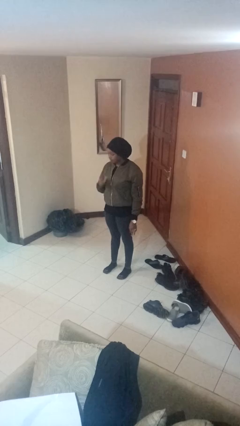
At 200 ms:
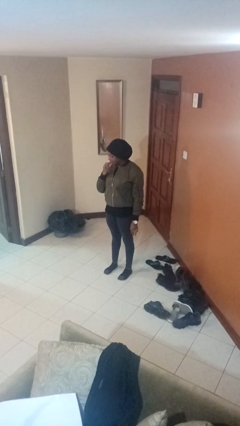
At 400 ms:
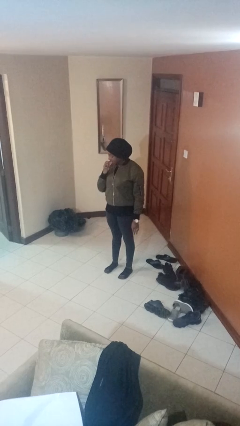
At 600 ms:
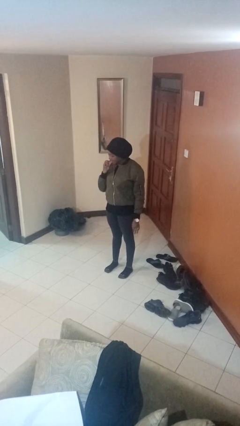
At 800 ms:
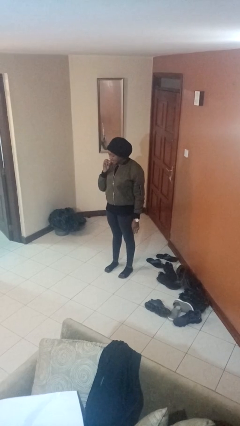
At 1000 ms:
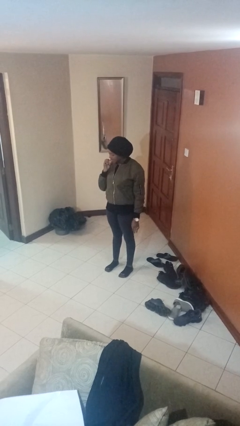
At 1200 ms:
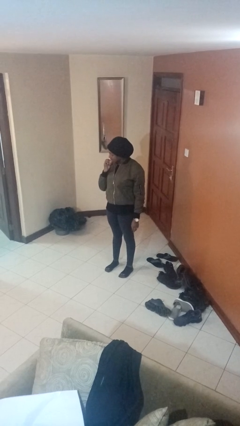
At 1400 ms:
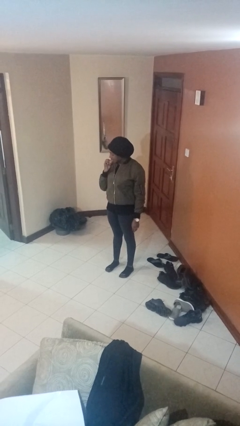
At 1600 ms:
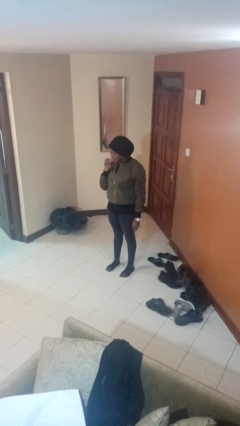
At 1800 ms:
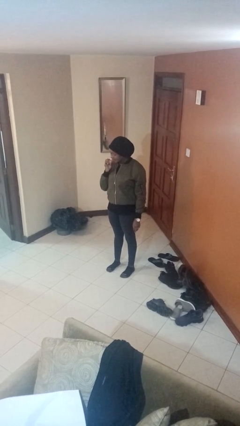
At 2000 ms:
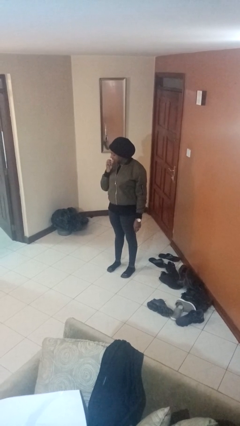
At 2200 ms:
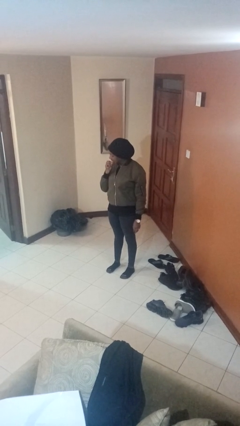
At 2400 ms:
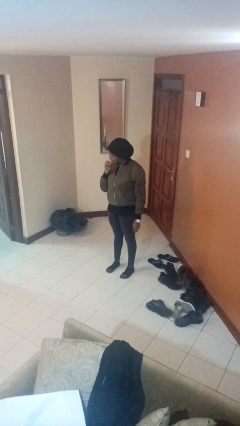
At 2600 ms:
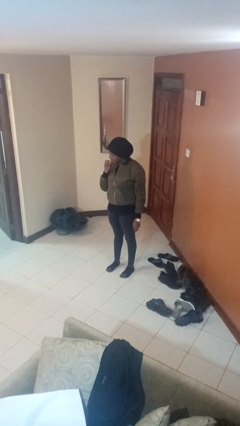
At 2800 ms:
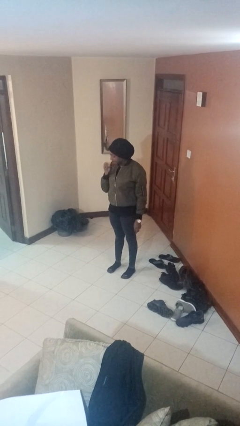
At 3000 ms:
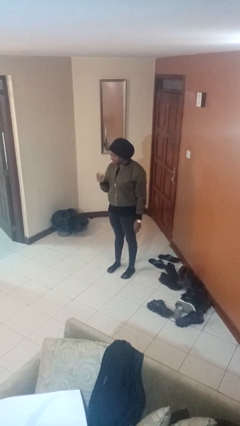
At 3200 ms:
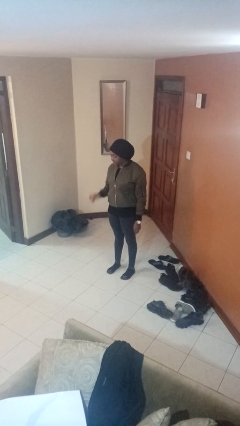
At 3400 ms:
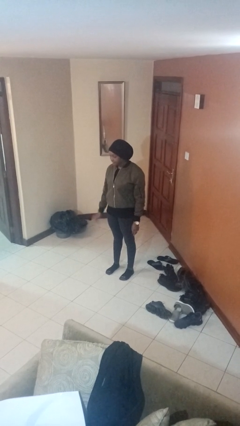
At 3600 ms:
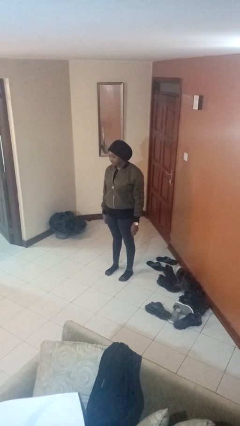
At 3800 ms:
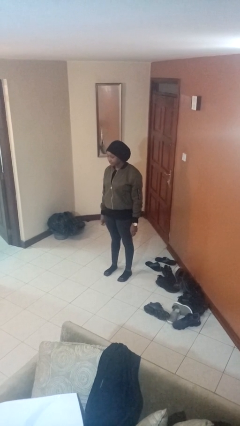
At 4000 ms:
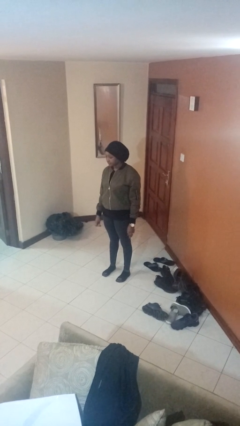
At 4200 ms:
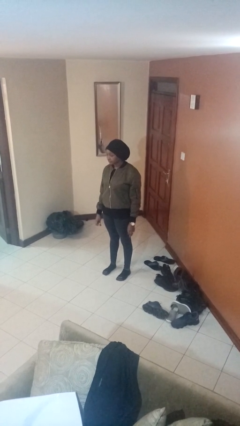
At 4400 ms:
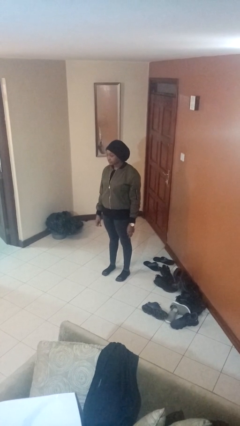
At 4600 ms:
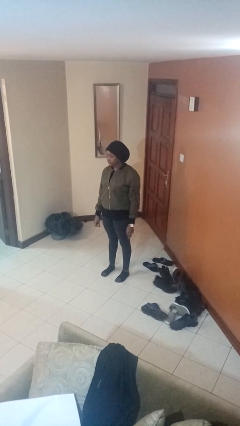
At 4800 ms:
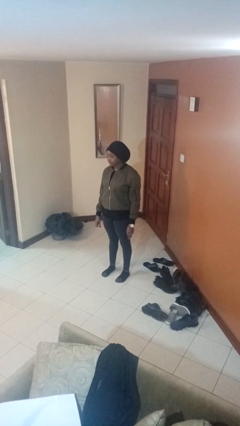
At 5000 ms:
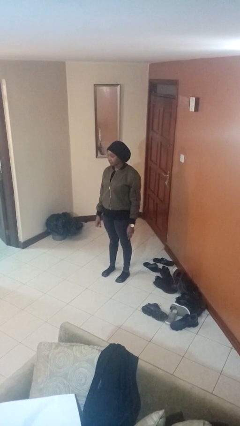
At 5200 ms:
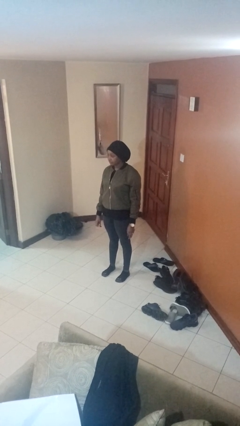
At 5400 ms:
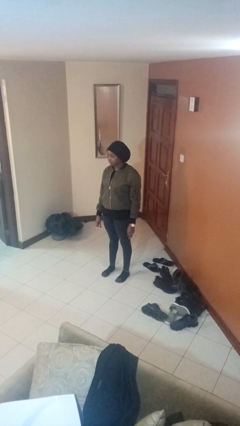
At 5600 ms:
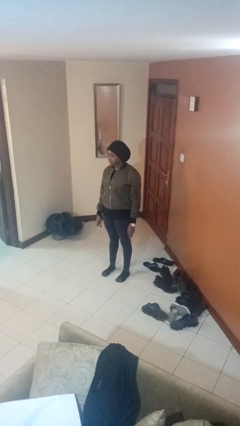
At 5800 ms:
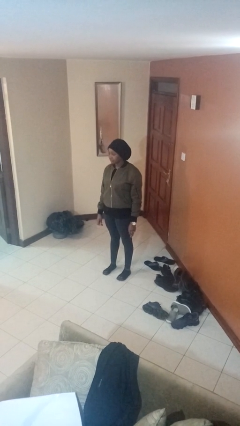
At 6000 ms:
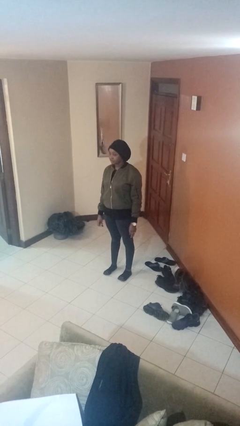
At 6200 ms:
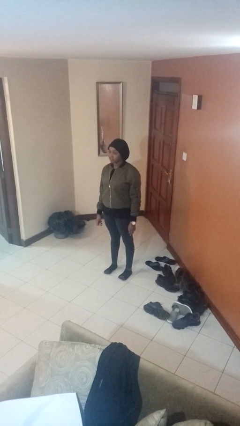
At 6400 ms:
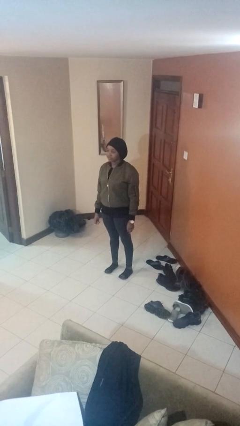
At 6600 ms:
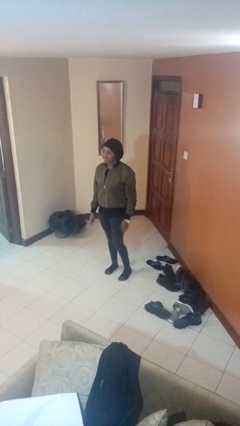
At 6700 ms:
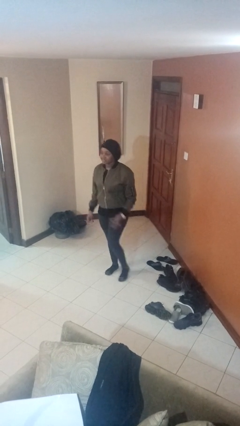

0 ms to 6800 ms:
person applies lip makeup

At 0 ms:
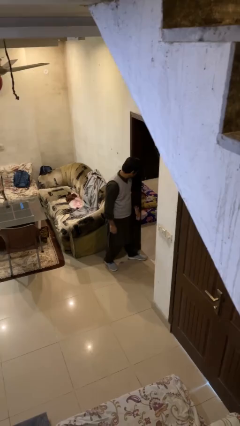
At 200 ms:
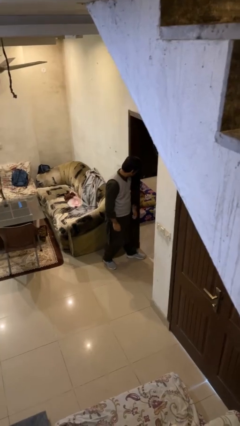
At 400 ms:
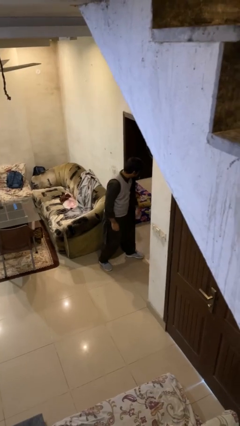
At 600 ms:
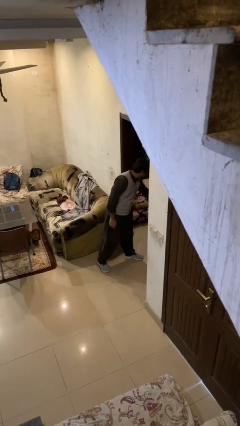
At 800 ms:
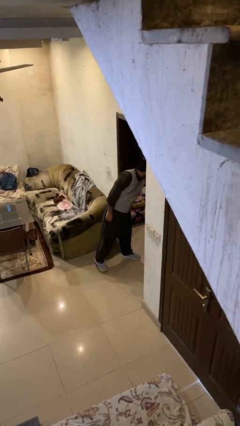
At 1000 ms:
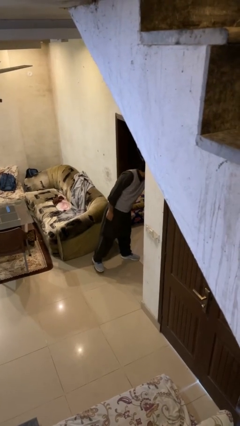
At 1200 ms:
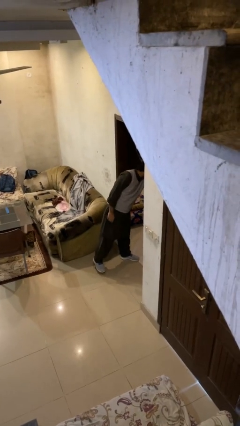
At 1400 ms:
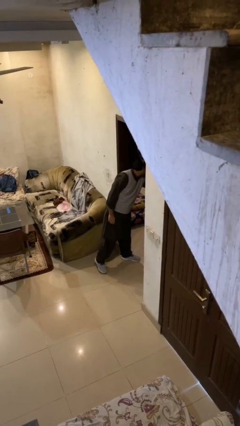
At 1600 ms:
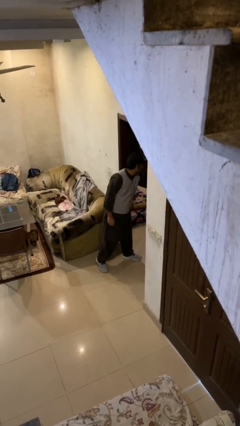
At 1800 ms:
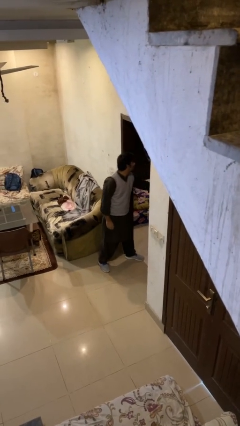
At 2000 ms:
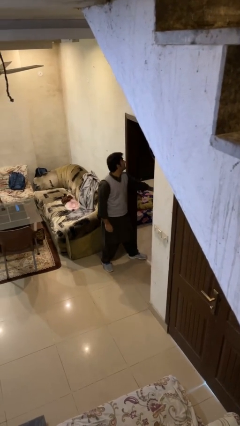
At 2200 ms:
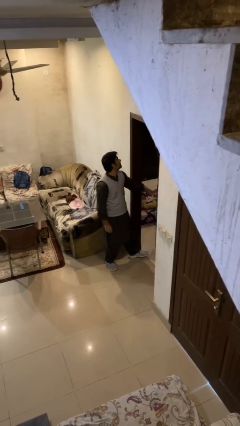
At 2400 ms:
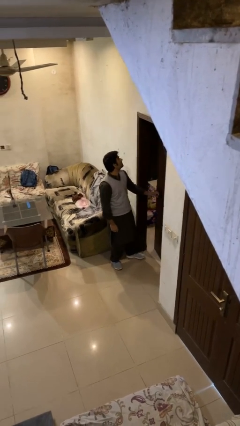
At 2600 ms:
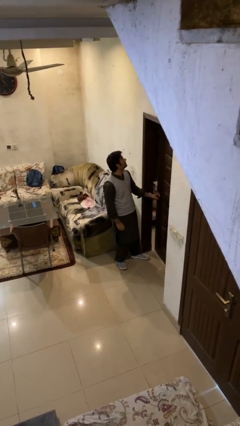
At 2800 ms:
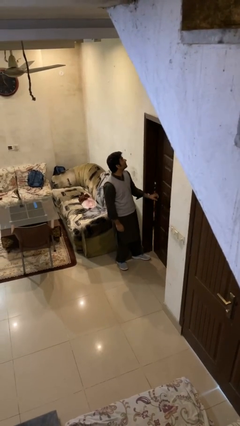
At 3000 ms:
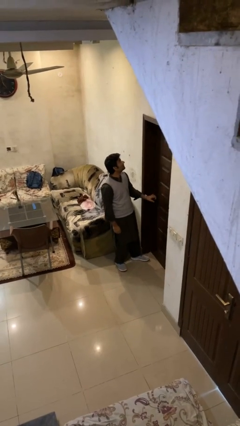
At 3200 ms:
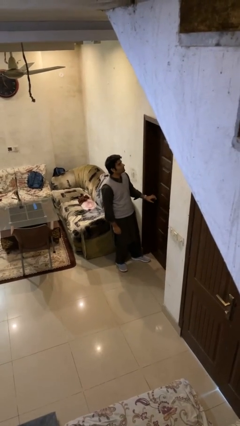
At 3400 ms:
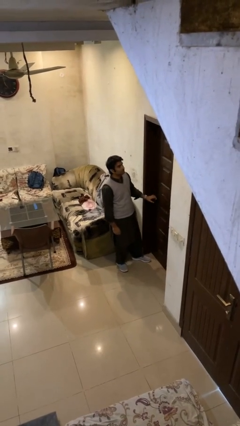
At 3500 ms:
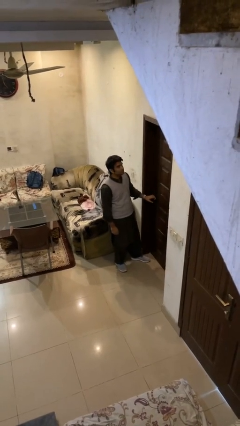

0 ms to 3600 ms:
person closes facility door

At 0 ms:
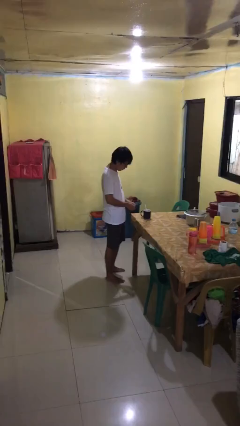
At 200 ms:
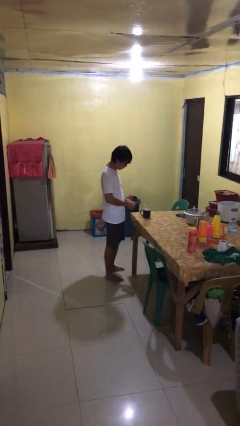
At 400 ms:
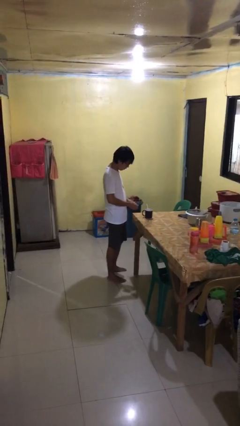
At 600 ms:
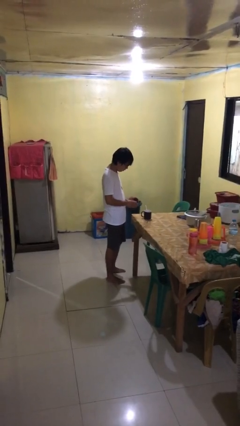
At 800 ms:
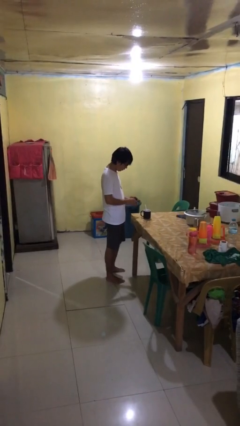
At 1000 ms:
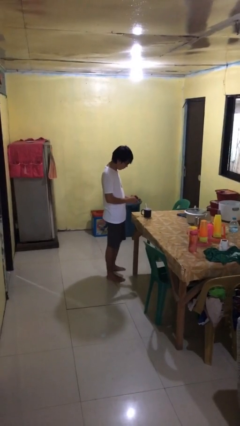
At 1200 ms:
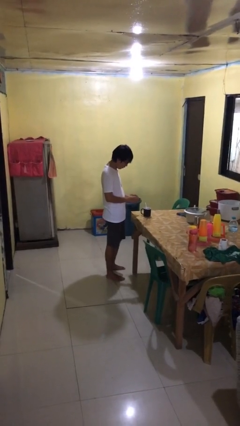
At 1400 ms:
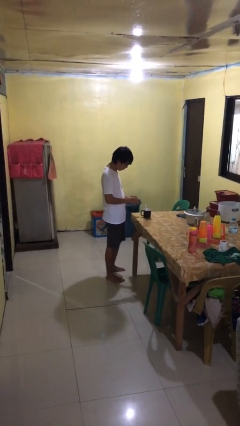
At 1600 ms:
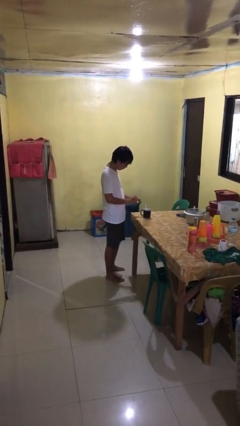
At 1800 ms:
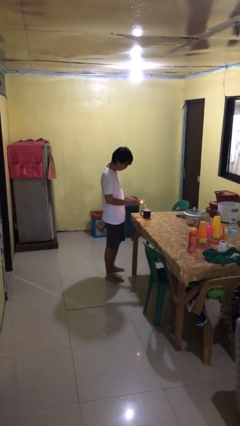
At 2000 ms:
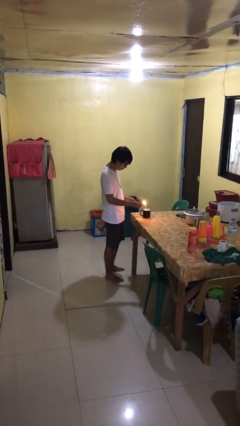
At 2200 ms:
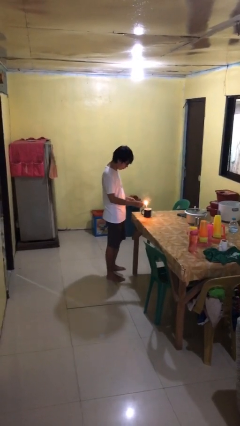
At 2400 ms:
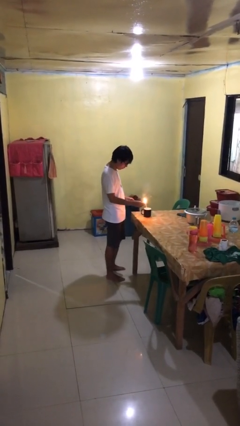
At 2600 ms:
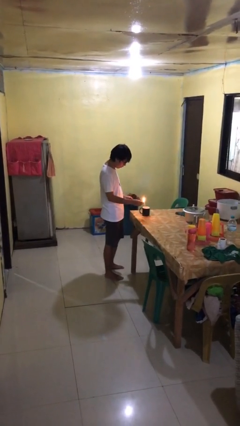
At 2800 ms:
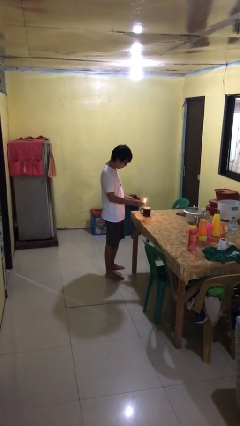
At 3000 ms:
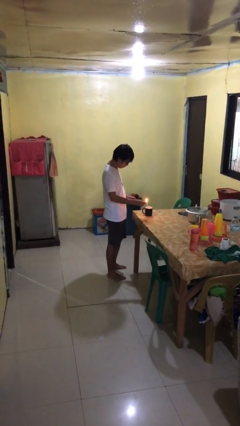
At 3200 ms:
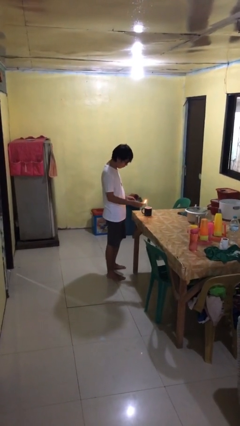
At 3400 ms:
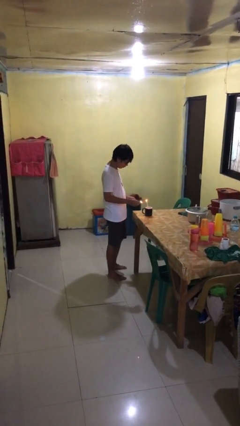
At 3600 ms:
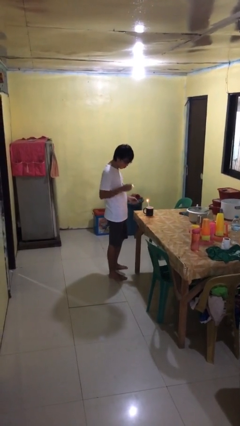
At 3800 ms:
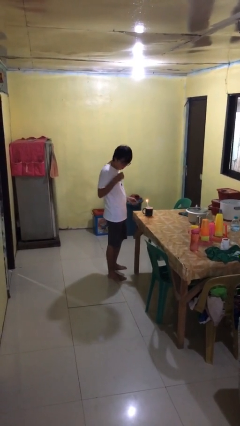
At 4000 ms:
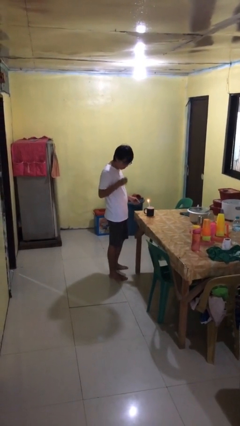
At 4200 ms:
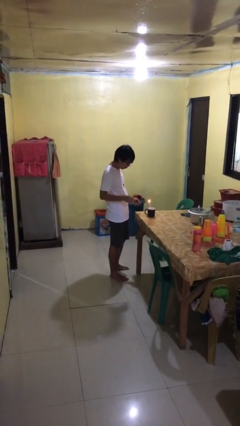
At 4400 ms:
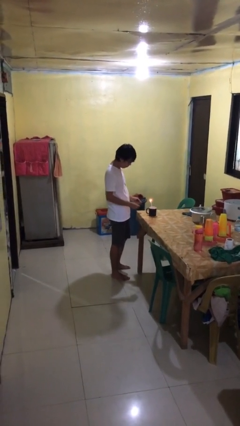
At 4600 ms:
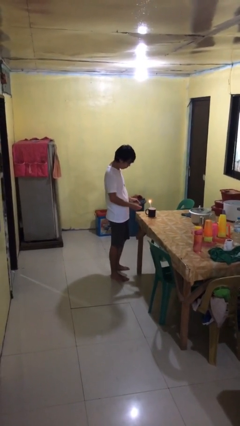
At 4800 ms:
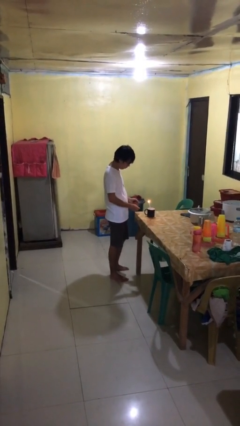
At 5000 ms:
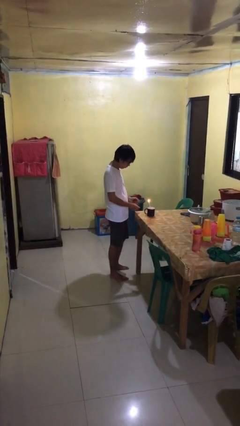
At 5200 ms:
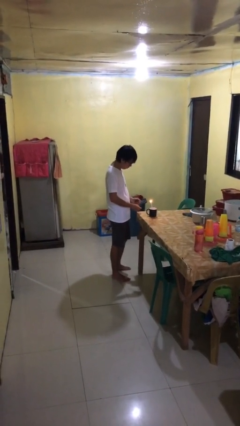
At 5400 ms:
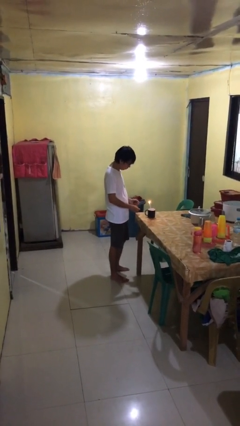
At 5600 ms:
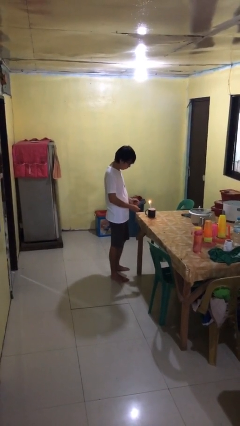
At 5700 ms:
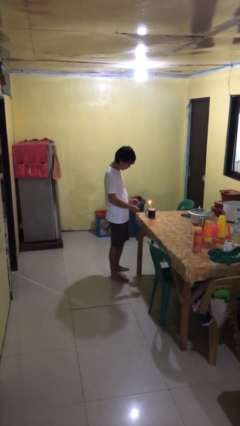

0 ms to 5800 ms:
person lights candle

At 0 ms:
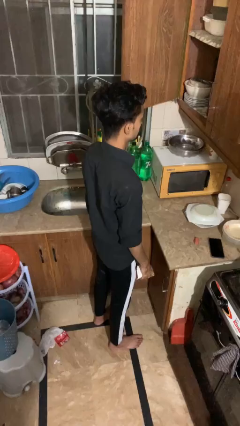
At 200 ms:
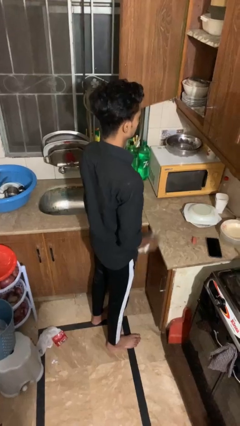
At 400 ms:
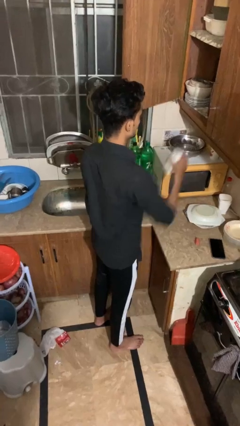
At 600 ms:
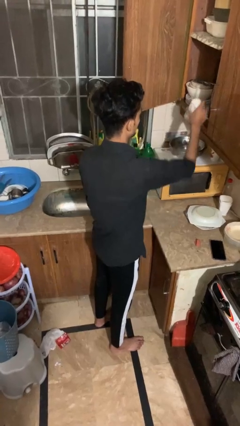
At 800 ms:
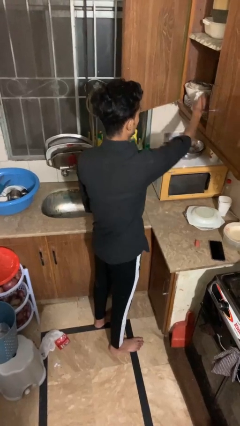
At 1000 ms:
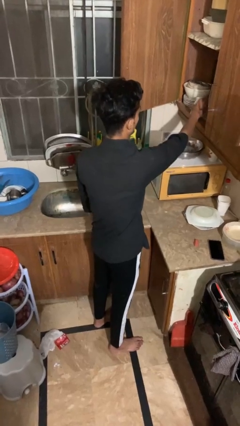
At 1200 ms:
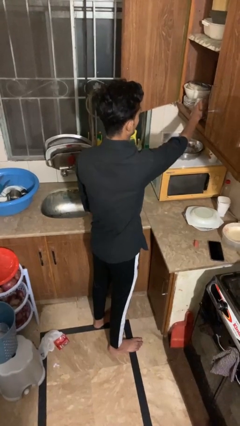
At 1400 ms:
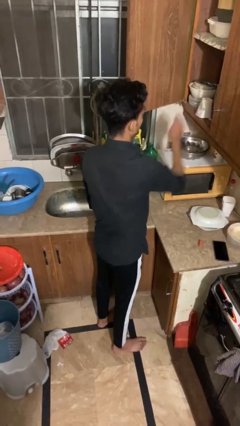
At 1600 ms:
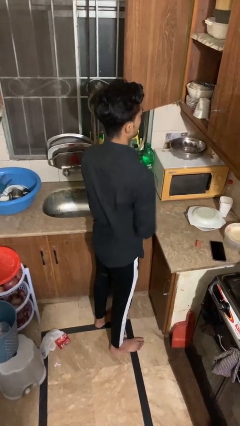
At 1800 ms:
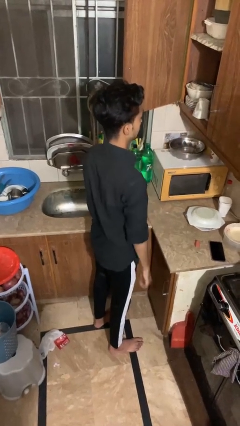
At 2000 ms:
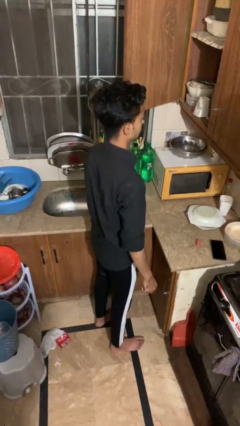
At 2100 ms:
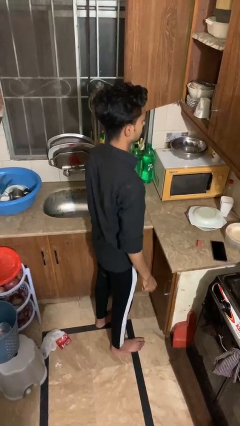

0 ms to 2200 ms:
person puts down object into cabinet
